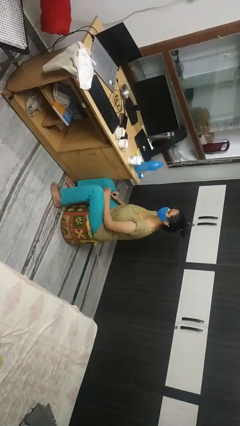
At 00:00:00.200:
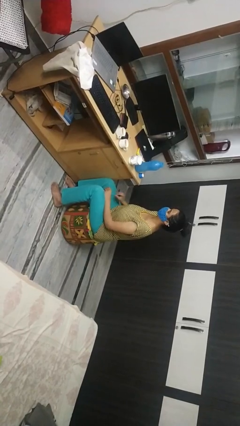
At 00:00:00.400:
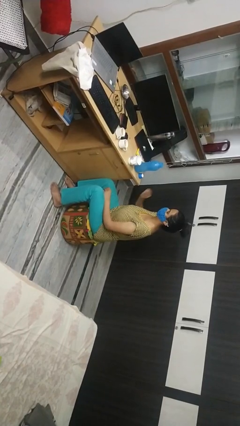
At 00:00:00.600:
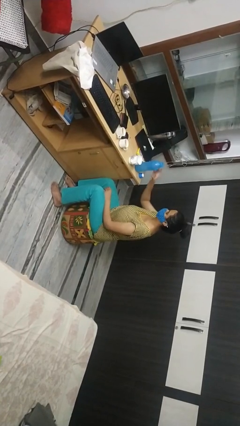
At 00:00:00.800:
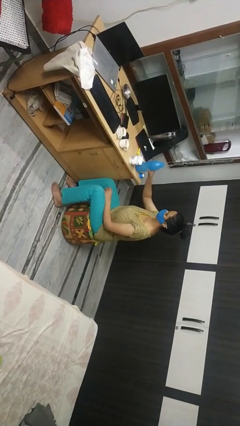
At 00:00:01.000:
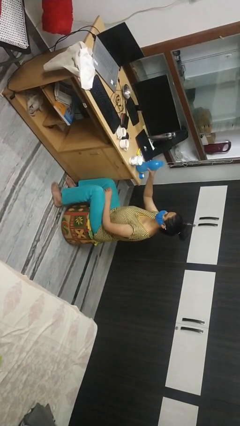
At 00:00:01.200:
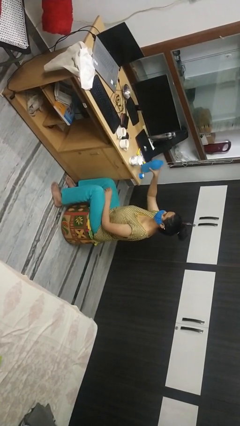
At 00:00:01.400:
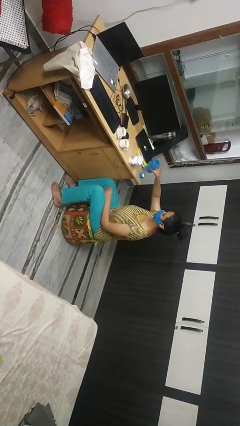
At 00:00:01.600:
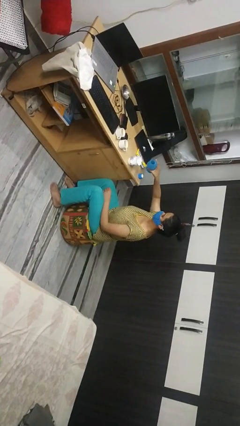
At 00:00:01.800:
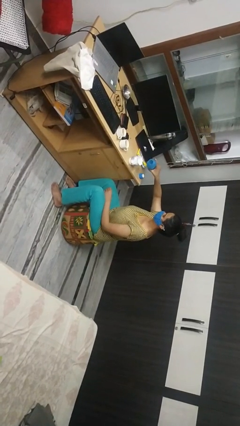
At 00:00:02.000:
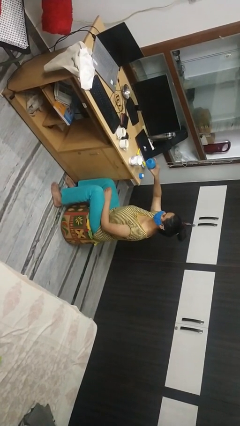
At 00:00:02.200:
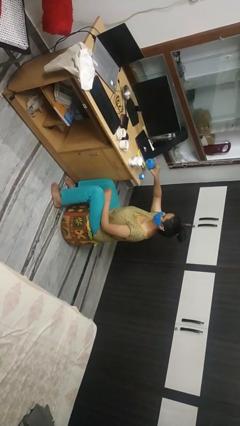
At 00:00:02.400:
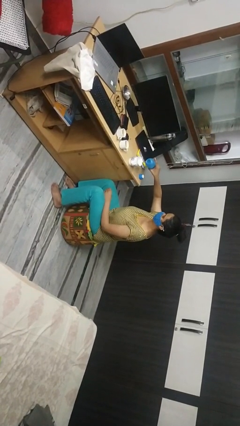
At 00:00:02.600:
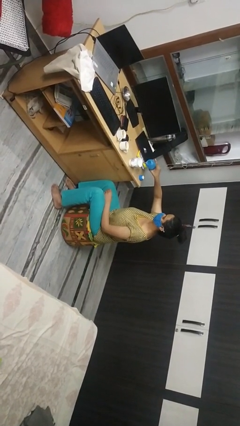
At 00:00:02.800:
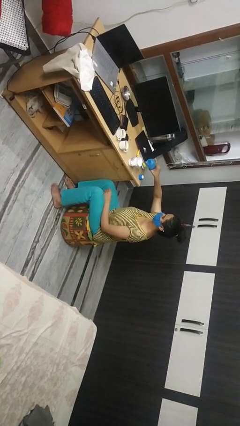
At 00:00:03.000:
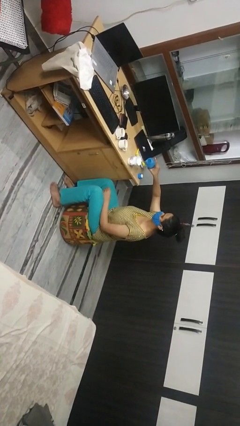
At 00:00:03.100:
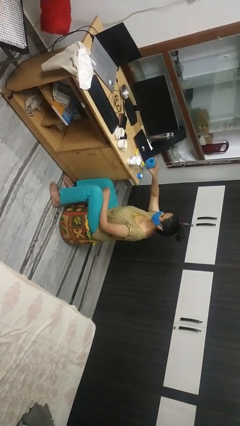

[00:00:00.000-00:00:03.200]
person pours liquid into cup

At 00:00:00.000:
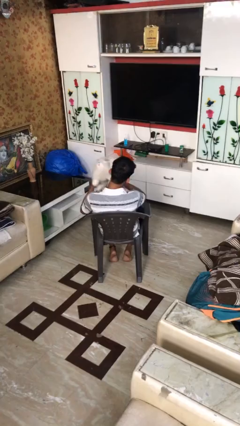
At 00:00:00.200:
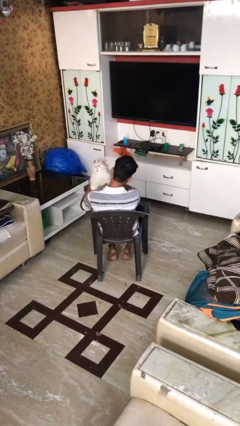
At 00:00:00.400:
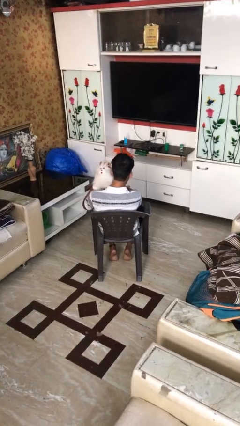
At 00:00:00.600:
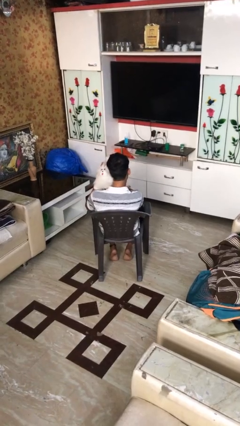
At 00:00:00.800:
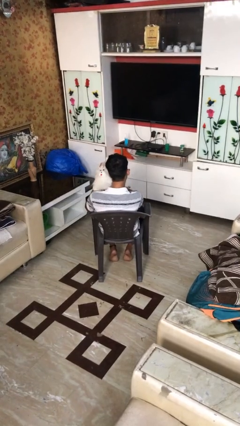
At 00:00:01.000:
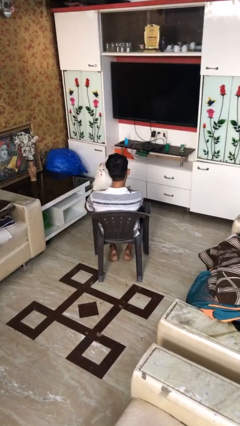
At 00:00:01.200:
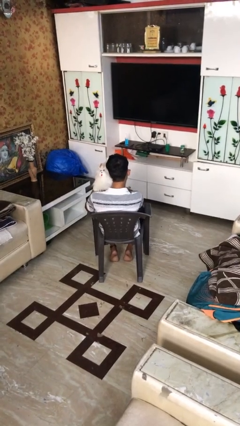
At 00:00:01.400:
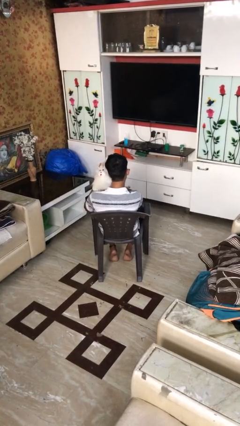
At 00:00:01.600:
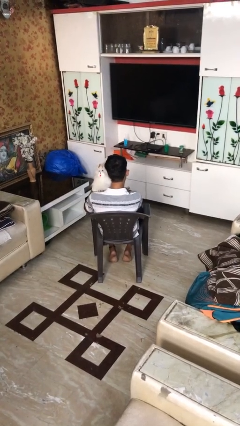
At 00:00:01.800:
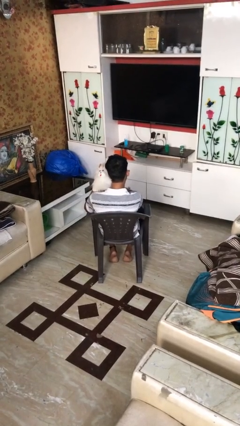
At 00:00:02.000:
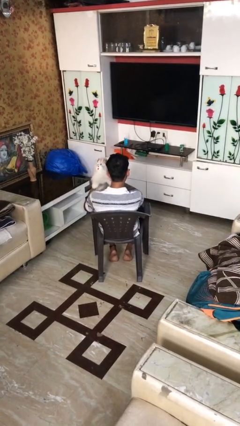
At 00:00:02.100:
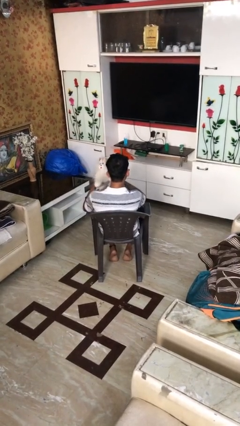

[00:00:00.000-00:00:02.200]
person hugs stuffed animal

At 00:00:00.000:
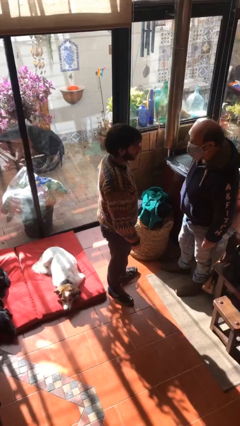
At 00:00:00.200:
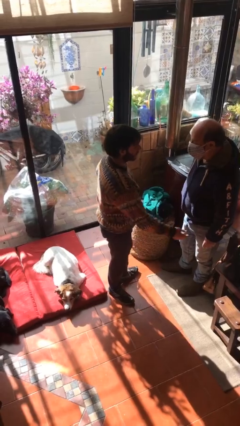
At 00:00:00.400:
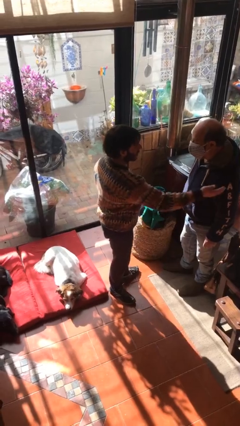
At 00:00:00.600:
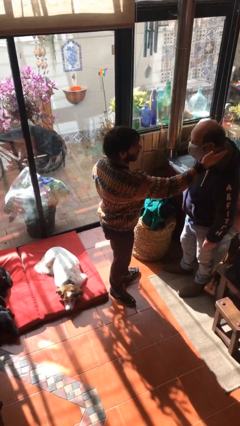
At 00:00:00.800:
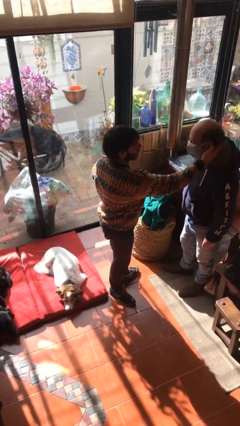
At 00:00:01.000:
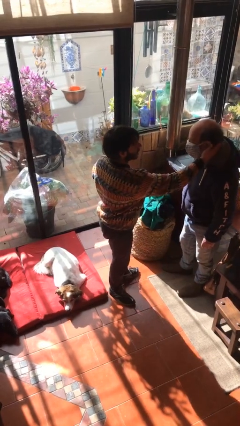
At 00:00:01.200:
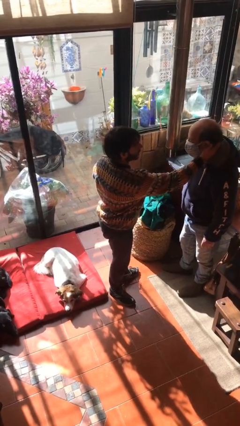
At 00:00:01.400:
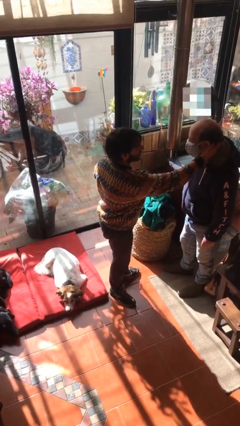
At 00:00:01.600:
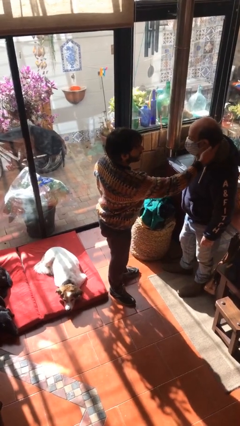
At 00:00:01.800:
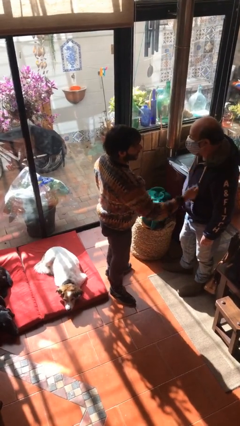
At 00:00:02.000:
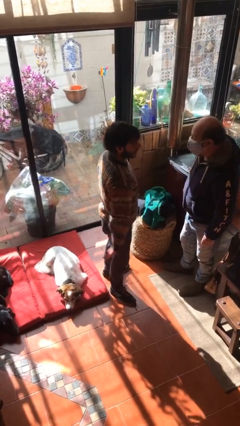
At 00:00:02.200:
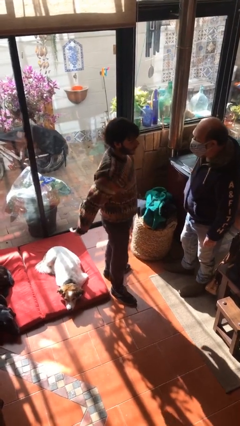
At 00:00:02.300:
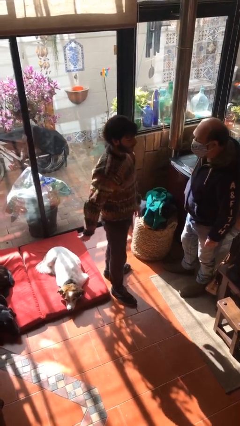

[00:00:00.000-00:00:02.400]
person touches face of person

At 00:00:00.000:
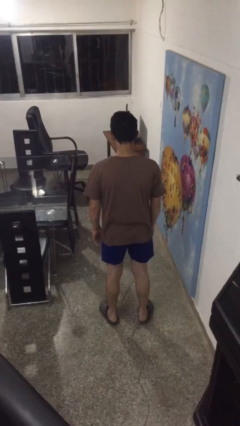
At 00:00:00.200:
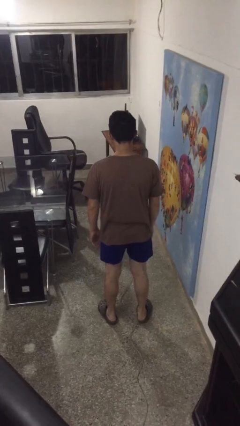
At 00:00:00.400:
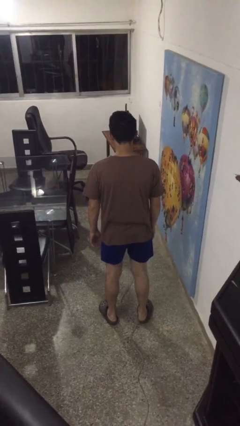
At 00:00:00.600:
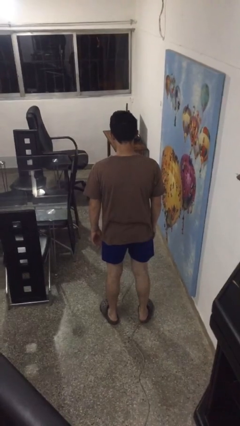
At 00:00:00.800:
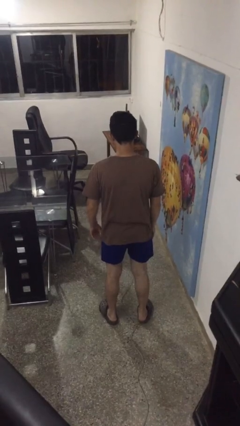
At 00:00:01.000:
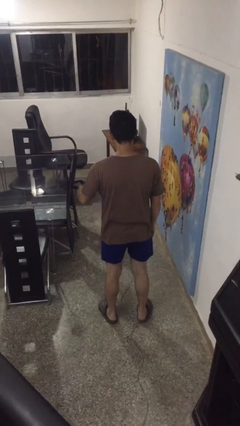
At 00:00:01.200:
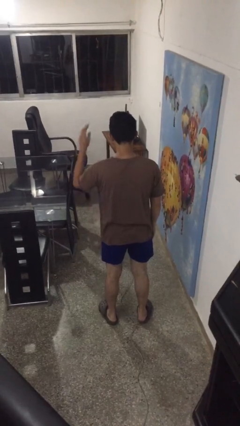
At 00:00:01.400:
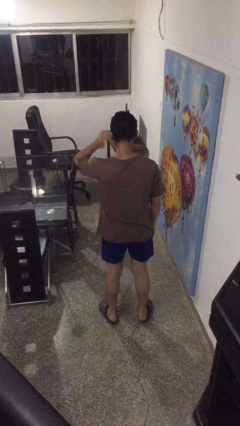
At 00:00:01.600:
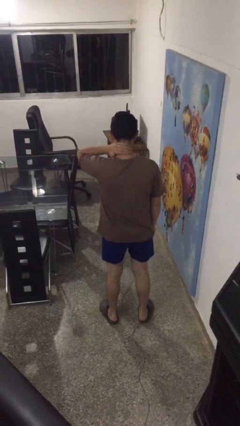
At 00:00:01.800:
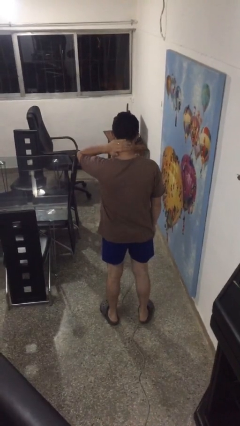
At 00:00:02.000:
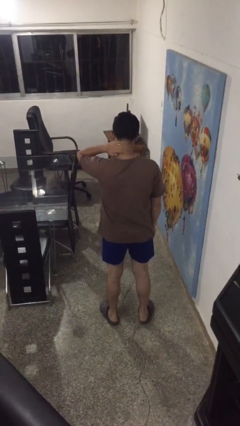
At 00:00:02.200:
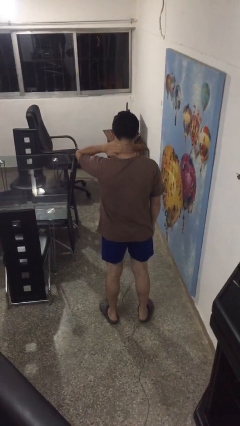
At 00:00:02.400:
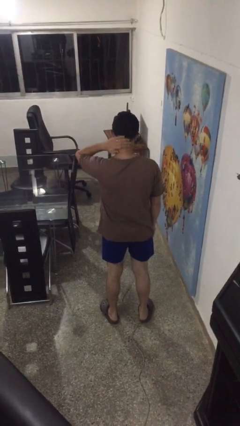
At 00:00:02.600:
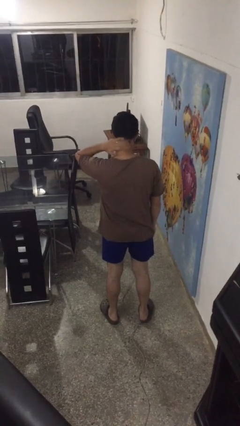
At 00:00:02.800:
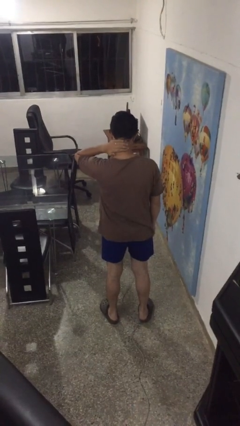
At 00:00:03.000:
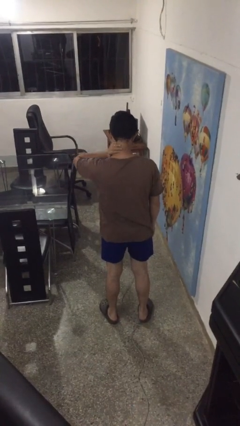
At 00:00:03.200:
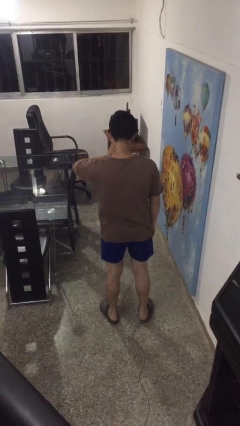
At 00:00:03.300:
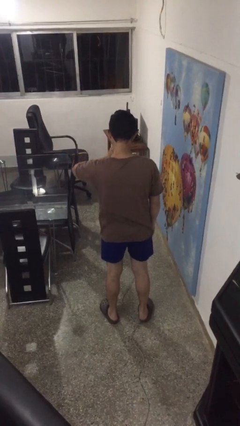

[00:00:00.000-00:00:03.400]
person swats bug

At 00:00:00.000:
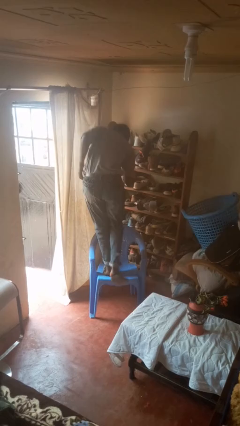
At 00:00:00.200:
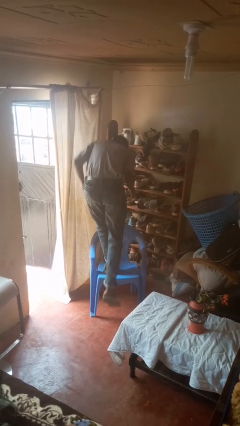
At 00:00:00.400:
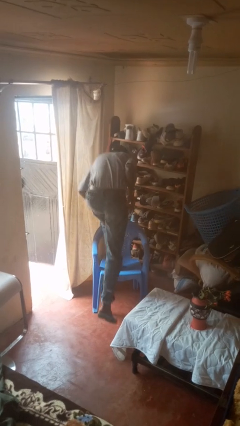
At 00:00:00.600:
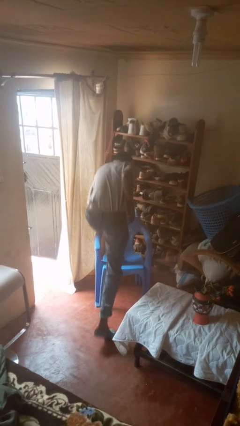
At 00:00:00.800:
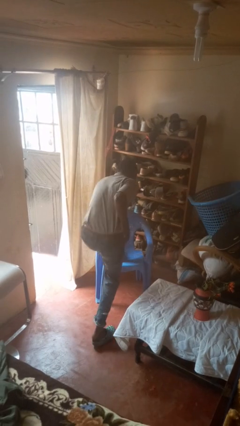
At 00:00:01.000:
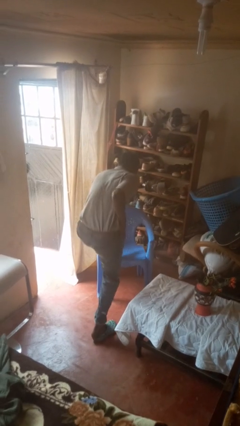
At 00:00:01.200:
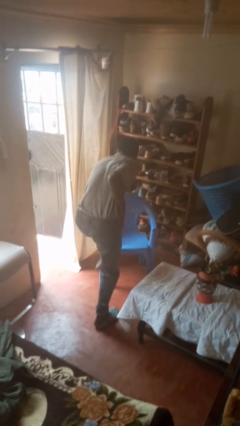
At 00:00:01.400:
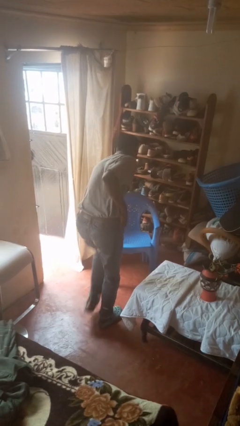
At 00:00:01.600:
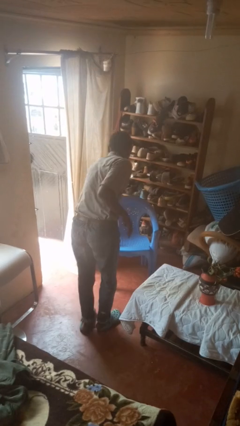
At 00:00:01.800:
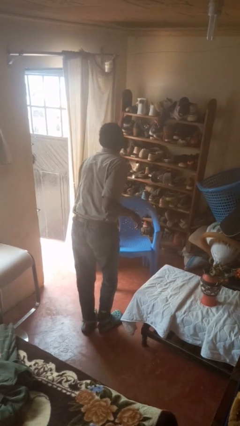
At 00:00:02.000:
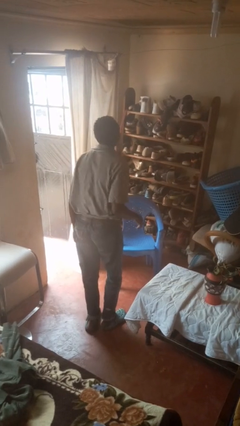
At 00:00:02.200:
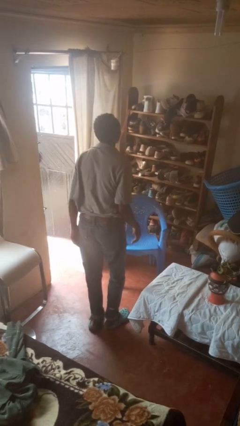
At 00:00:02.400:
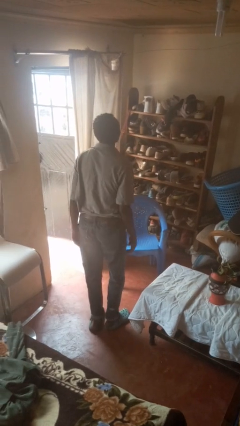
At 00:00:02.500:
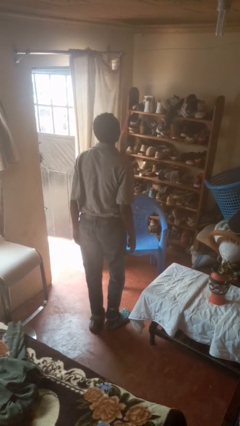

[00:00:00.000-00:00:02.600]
person climbs off chair

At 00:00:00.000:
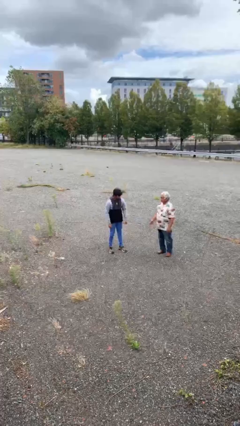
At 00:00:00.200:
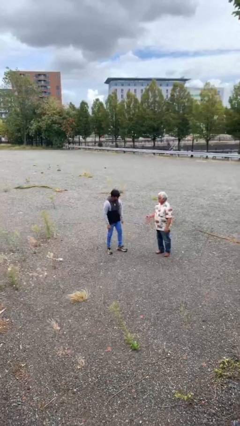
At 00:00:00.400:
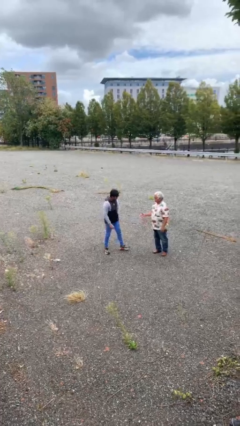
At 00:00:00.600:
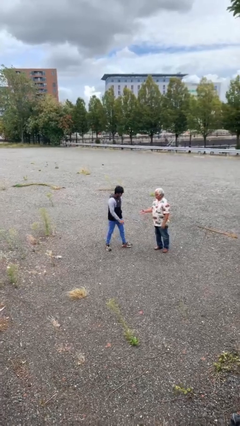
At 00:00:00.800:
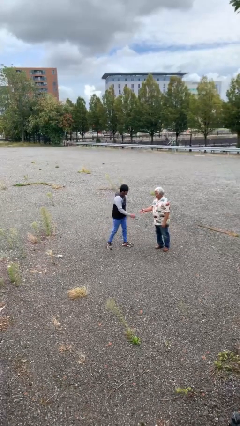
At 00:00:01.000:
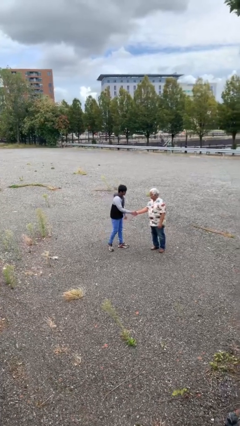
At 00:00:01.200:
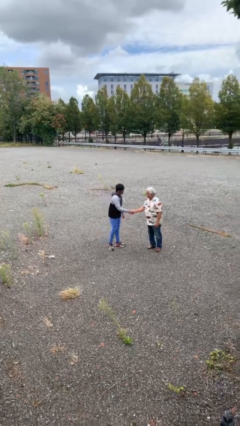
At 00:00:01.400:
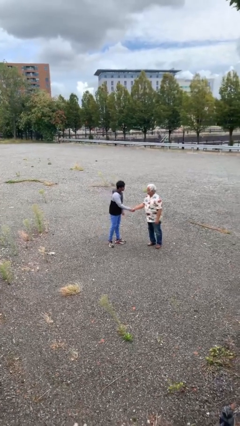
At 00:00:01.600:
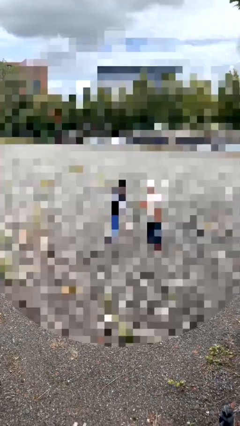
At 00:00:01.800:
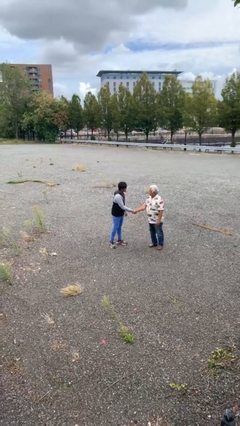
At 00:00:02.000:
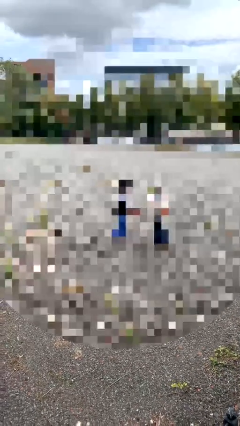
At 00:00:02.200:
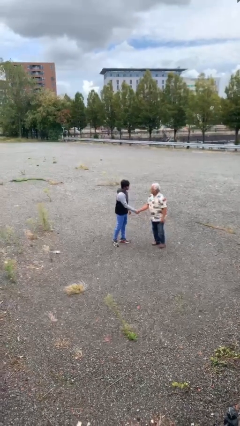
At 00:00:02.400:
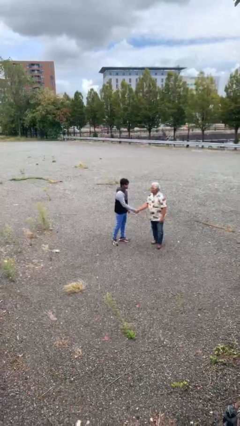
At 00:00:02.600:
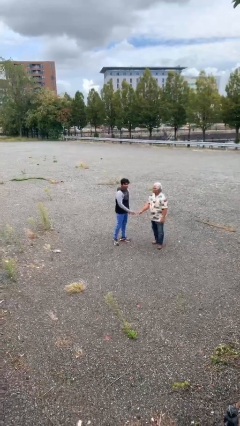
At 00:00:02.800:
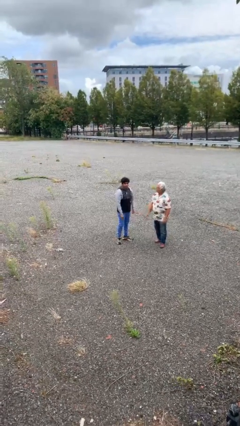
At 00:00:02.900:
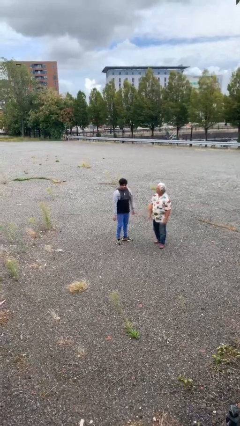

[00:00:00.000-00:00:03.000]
person shakes hand

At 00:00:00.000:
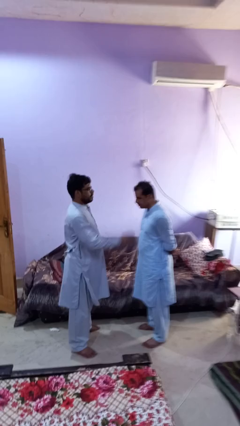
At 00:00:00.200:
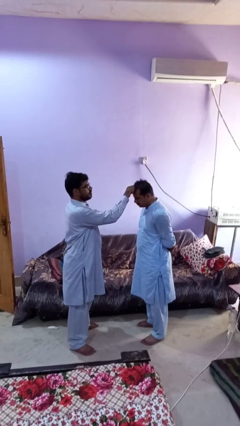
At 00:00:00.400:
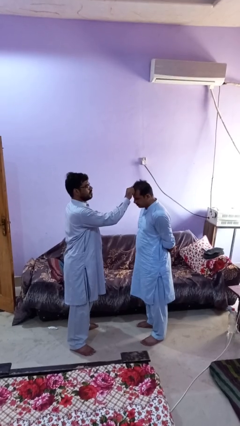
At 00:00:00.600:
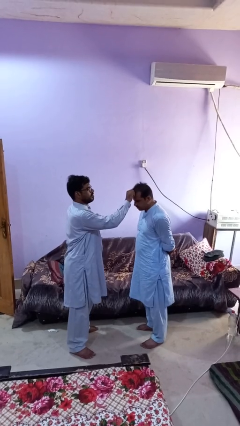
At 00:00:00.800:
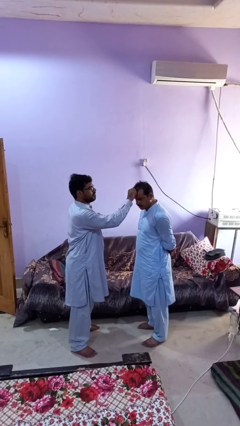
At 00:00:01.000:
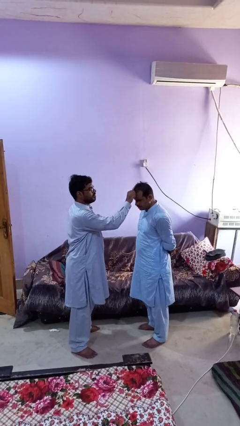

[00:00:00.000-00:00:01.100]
person grabs person by hair
